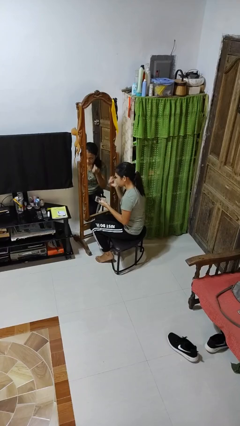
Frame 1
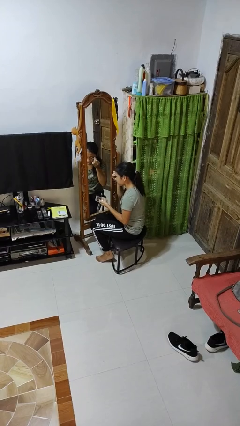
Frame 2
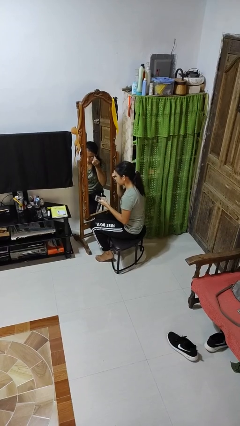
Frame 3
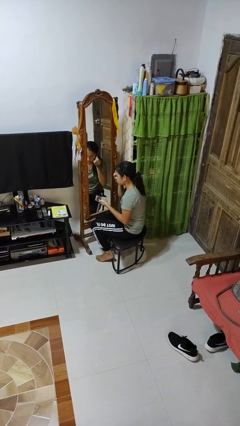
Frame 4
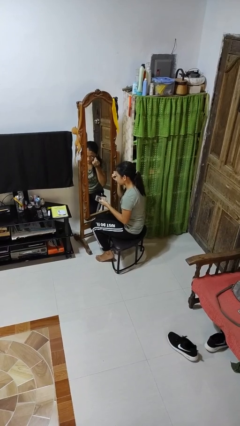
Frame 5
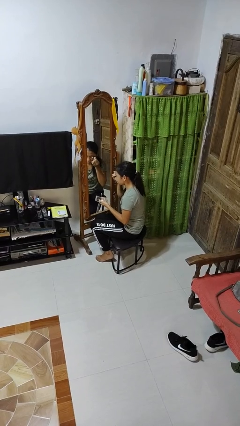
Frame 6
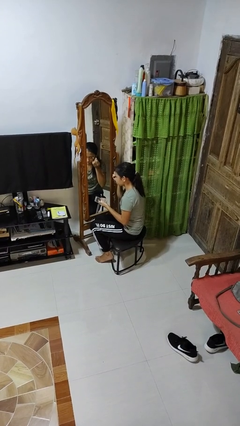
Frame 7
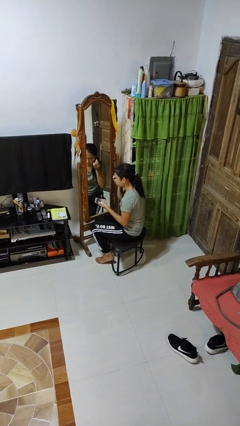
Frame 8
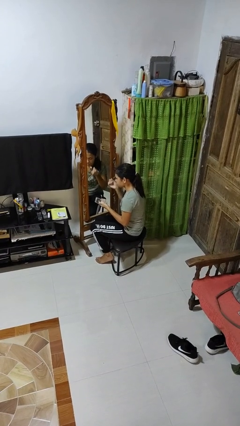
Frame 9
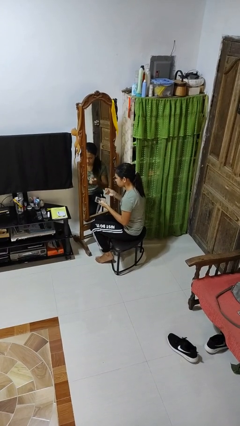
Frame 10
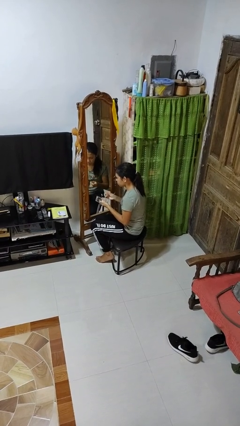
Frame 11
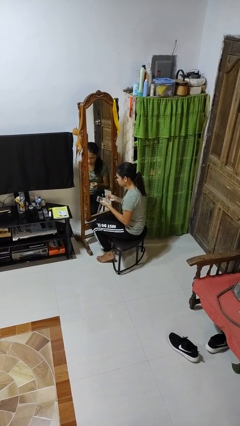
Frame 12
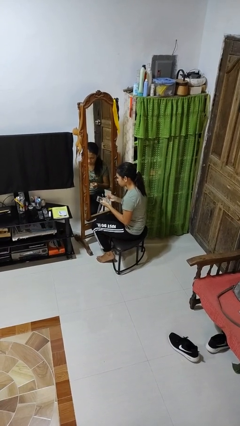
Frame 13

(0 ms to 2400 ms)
person applies eye makeup

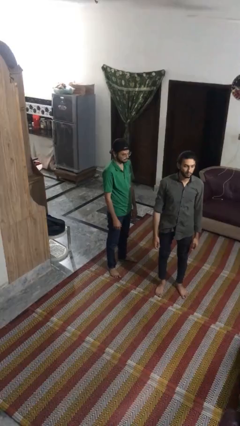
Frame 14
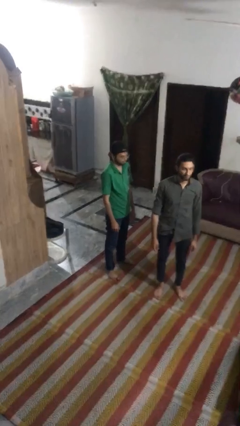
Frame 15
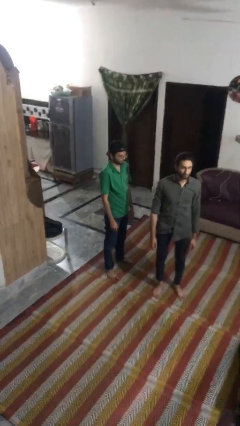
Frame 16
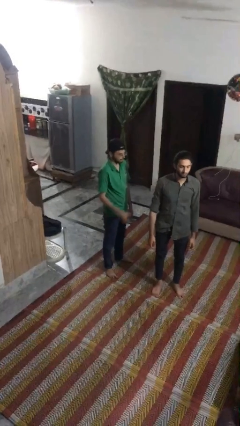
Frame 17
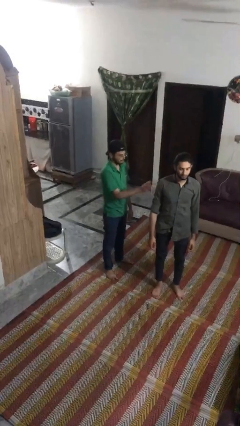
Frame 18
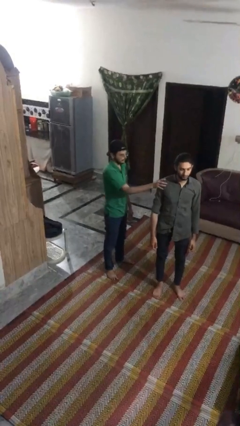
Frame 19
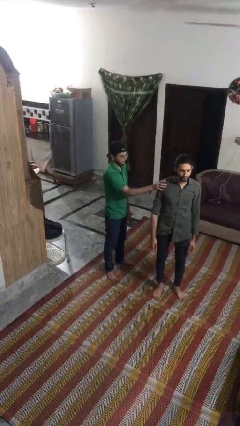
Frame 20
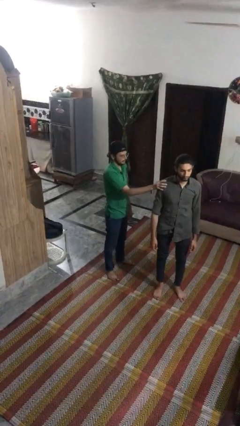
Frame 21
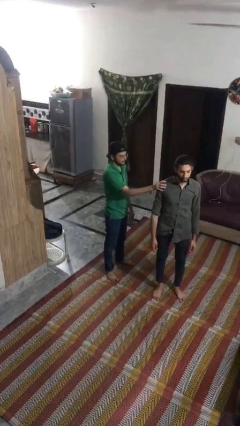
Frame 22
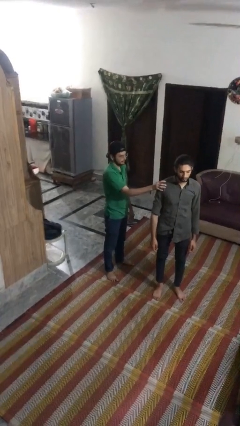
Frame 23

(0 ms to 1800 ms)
person grabs person by shoulder

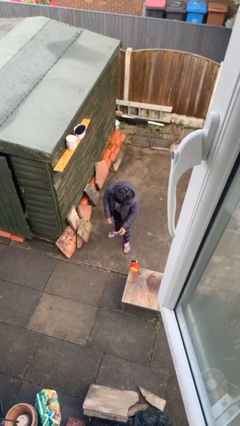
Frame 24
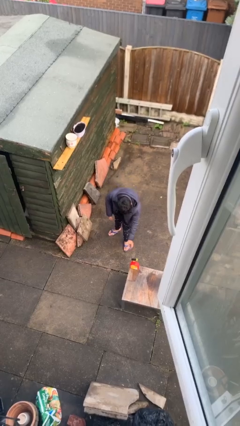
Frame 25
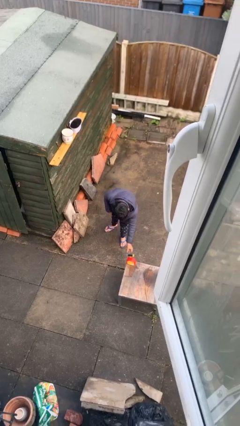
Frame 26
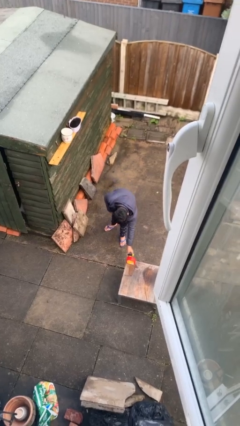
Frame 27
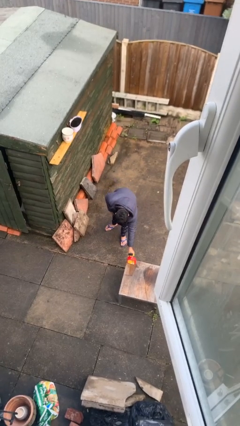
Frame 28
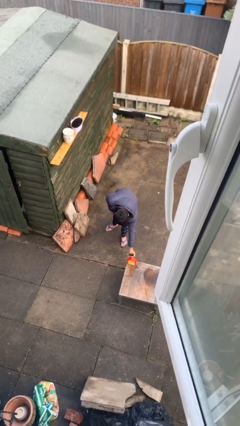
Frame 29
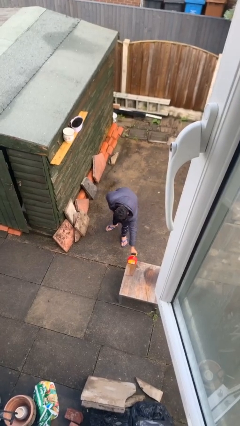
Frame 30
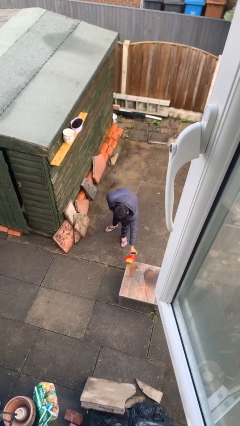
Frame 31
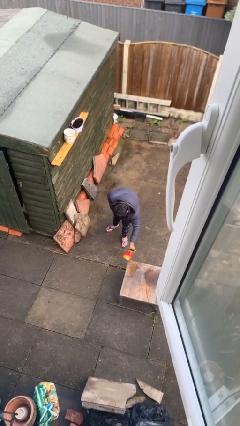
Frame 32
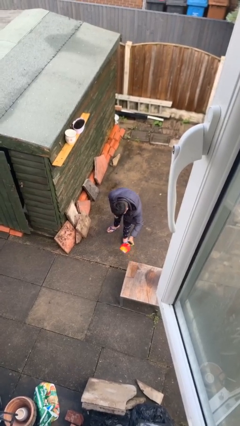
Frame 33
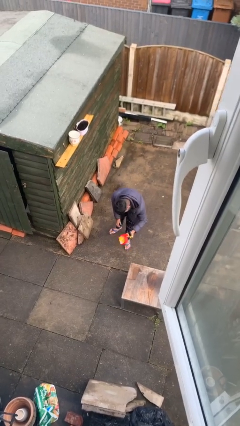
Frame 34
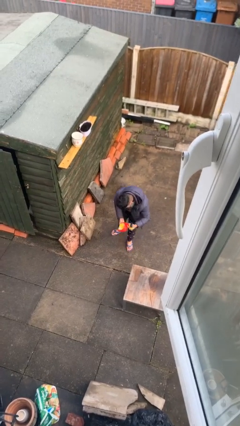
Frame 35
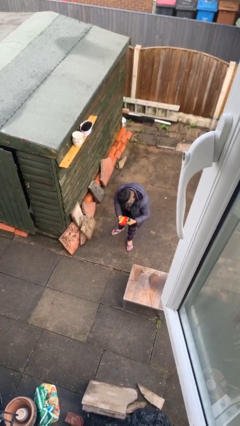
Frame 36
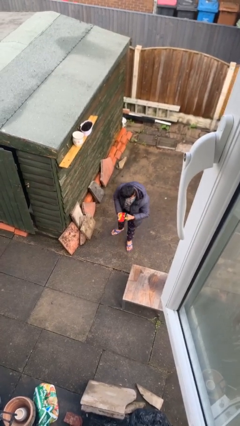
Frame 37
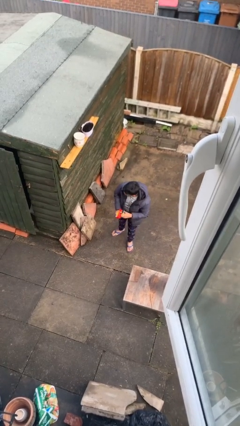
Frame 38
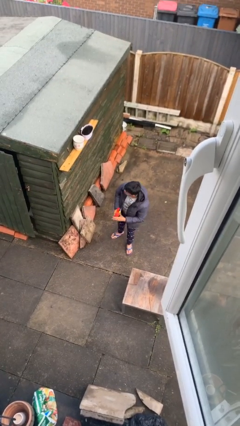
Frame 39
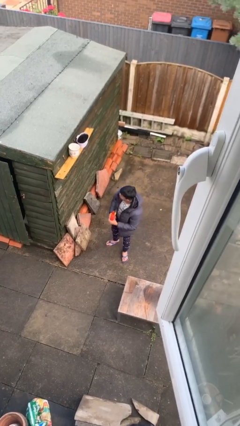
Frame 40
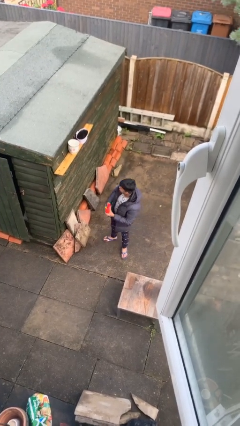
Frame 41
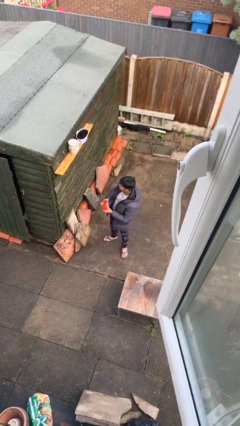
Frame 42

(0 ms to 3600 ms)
person picks up object from table

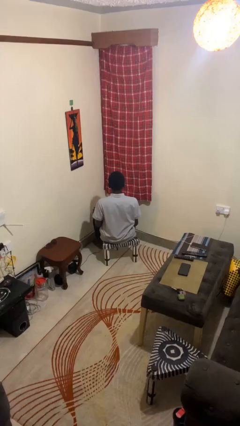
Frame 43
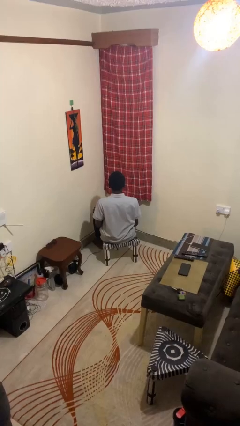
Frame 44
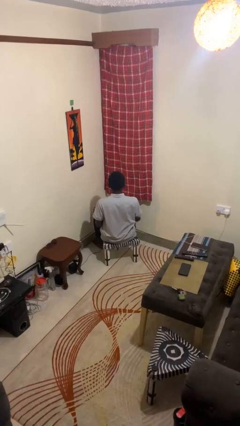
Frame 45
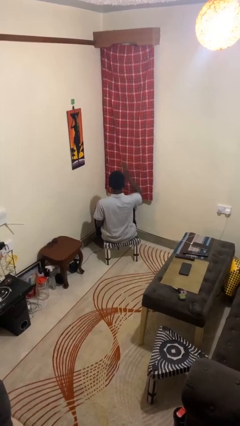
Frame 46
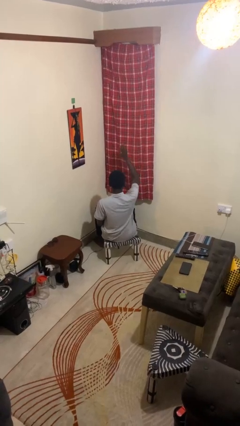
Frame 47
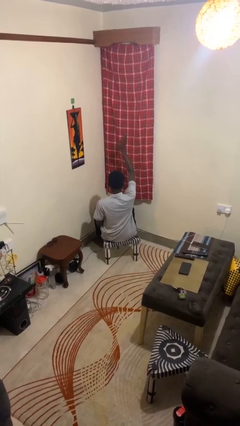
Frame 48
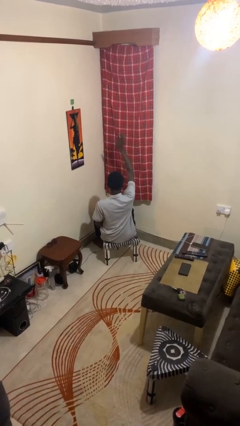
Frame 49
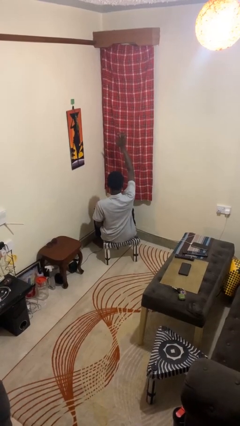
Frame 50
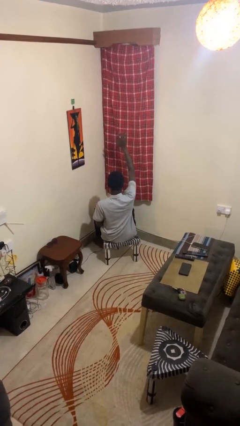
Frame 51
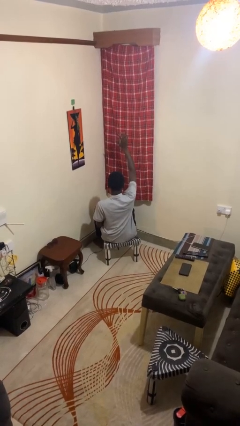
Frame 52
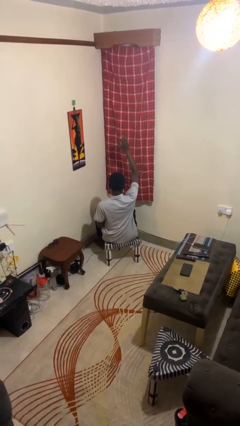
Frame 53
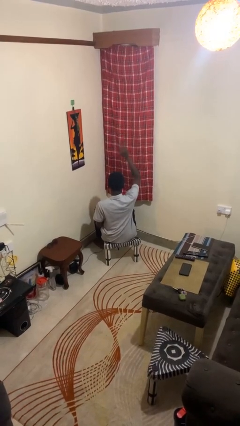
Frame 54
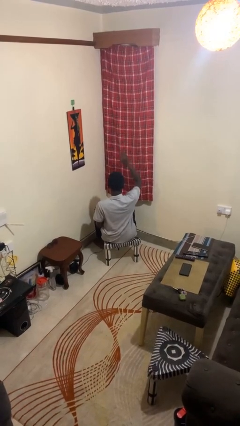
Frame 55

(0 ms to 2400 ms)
person gestures raise hand

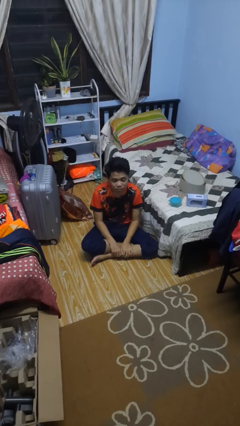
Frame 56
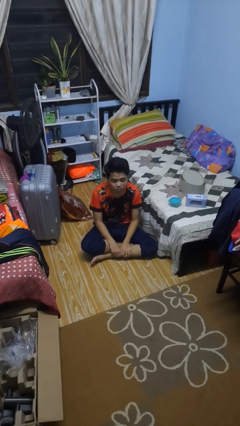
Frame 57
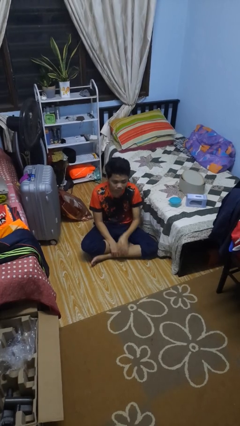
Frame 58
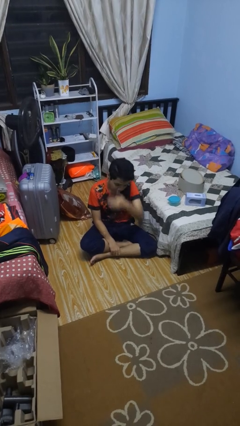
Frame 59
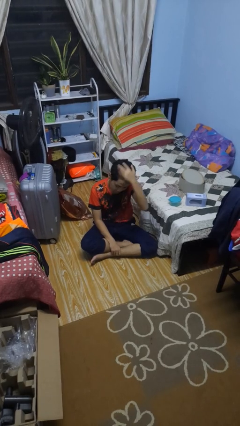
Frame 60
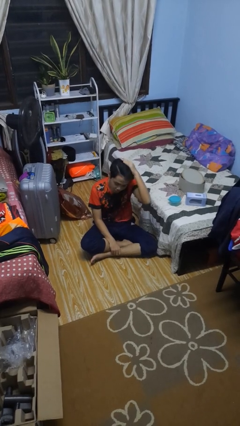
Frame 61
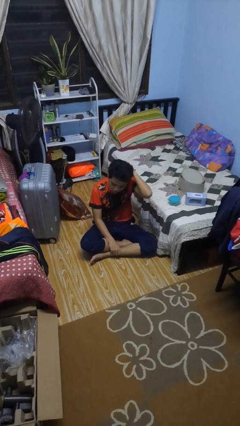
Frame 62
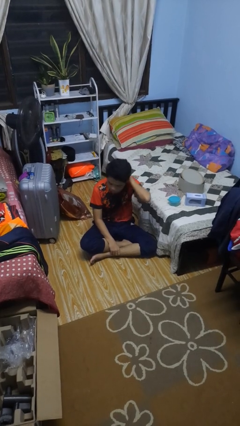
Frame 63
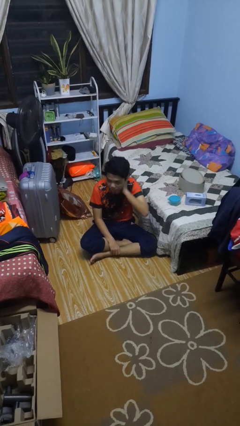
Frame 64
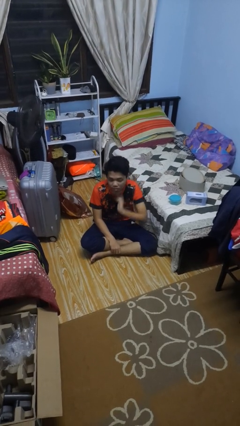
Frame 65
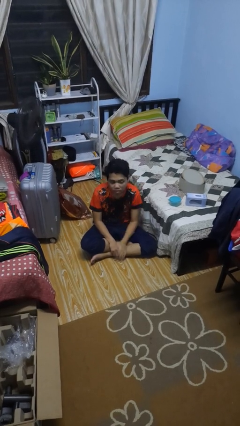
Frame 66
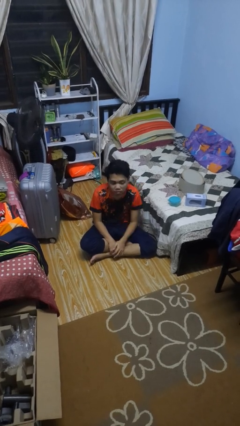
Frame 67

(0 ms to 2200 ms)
person strokes hair

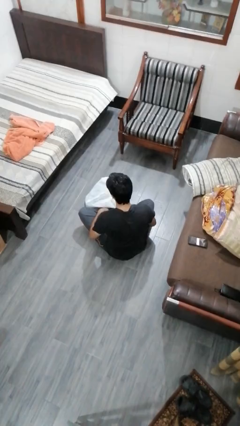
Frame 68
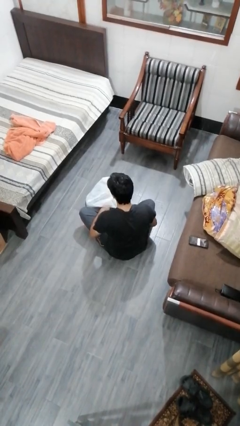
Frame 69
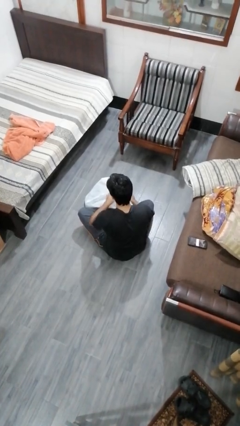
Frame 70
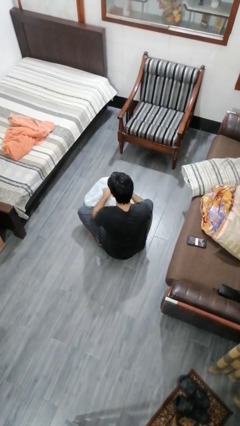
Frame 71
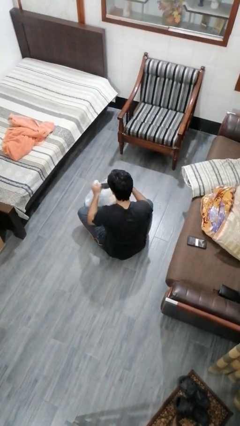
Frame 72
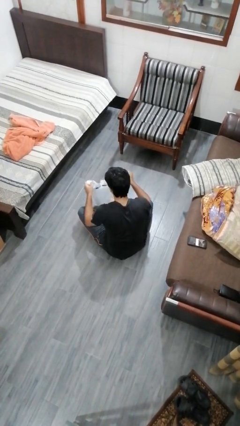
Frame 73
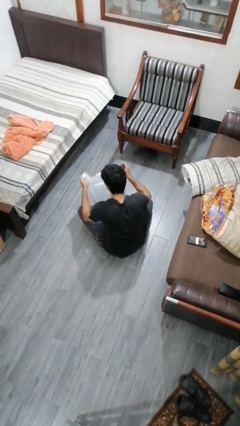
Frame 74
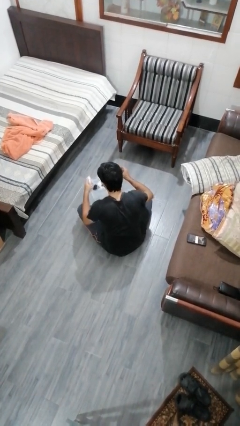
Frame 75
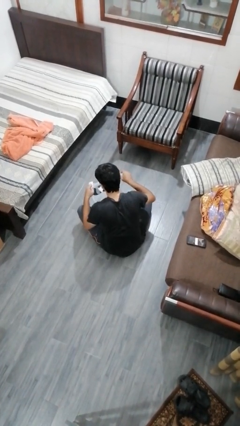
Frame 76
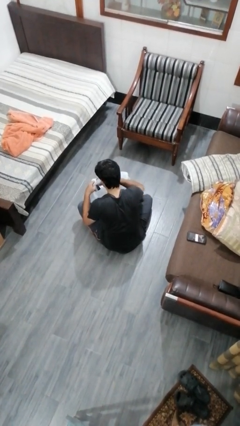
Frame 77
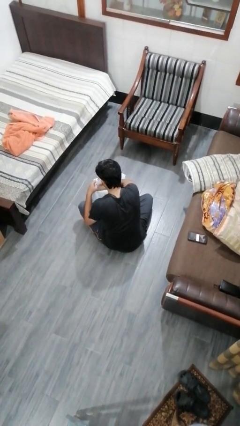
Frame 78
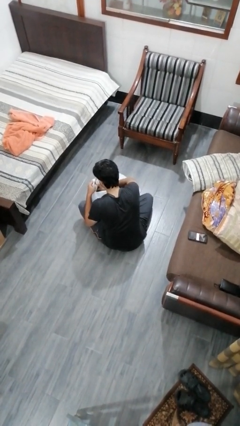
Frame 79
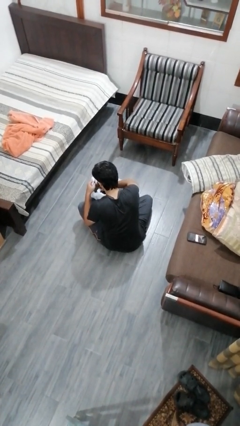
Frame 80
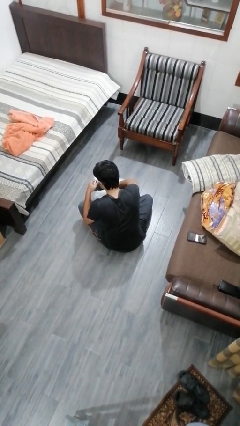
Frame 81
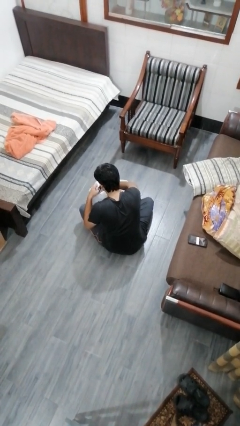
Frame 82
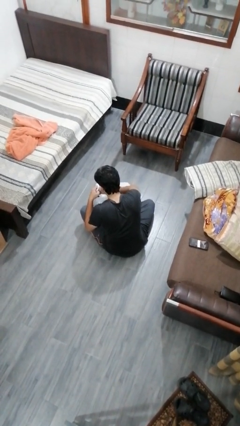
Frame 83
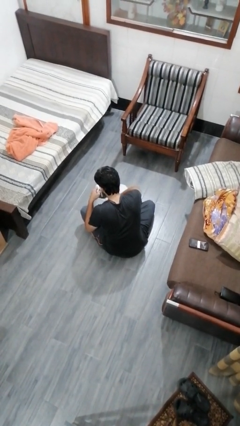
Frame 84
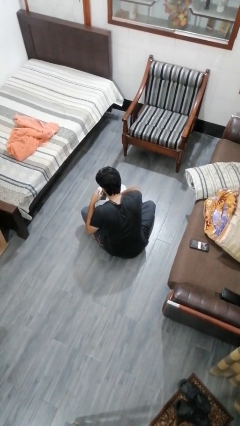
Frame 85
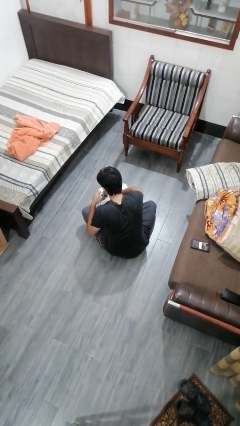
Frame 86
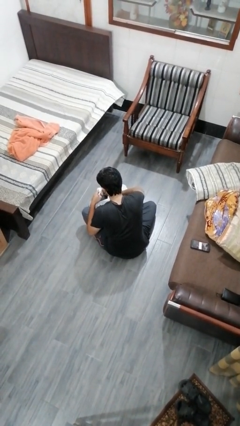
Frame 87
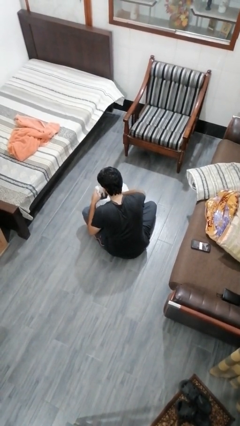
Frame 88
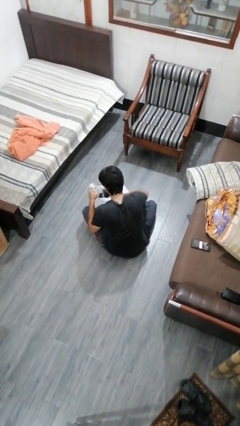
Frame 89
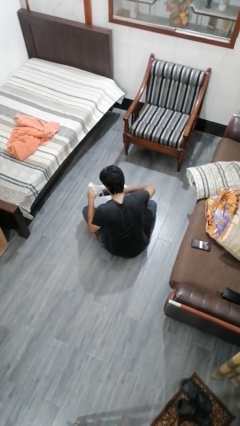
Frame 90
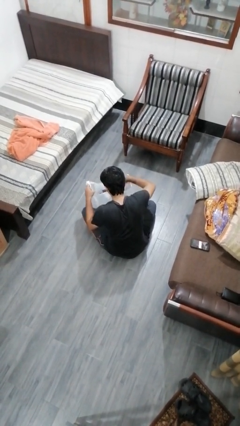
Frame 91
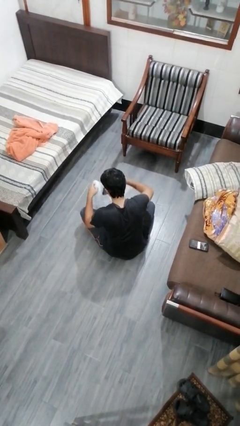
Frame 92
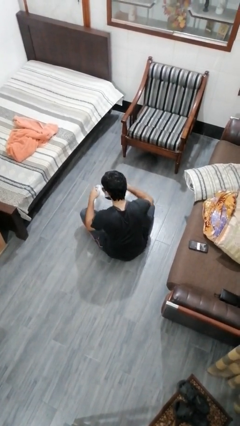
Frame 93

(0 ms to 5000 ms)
person searches in bag
